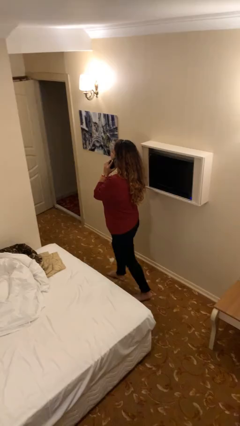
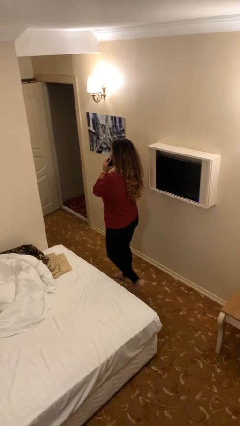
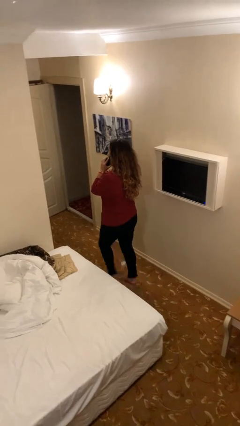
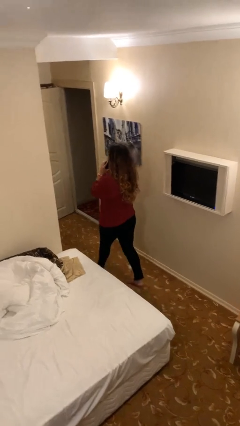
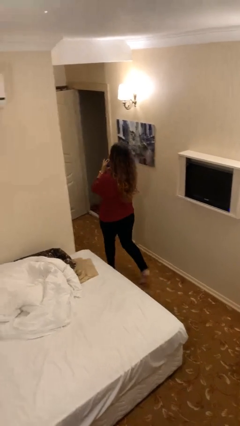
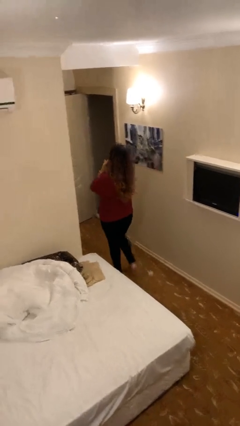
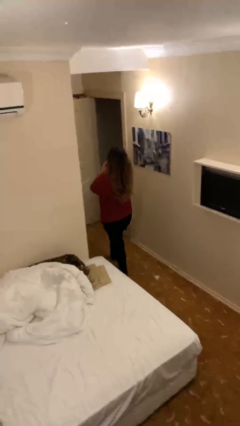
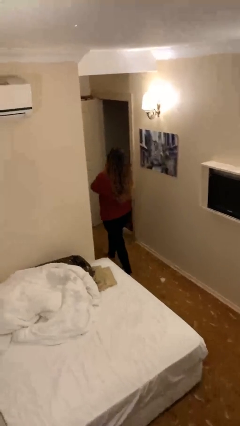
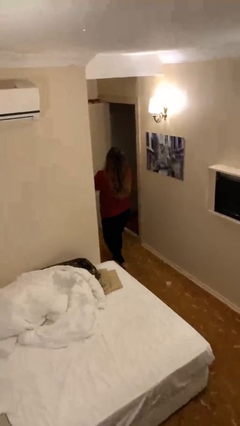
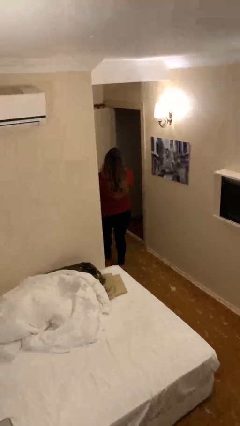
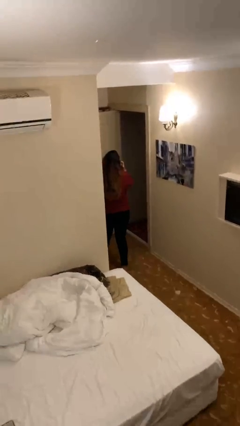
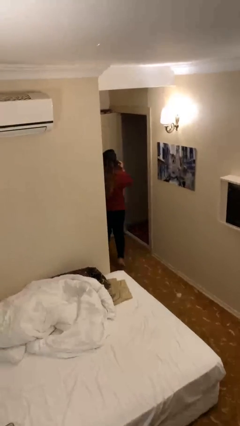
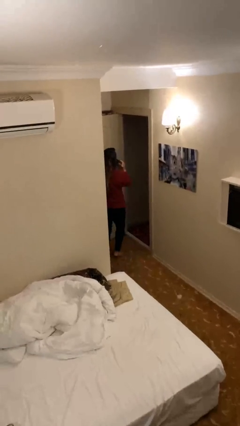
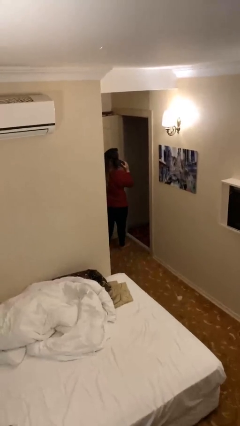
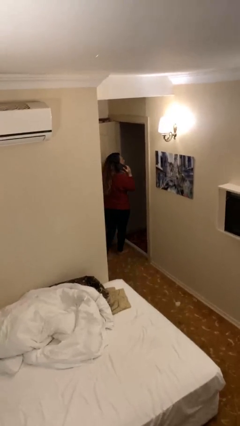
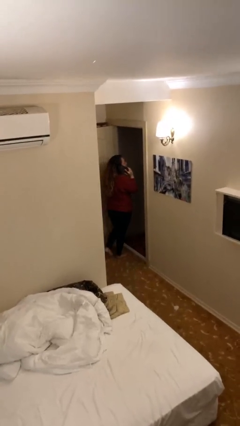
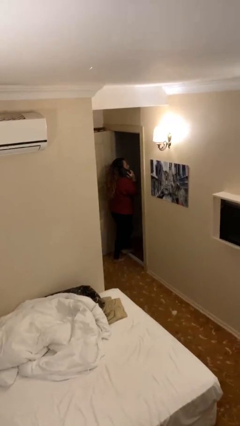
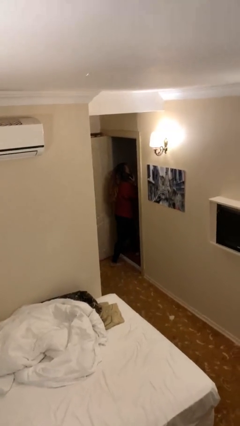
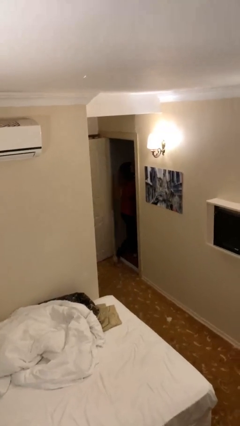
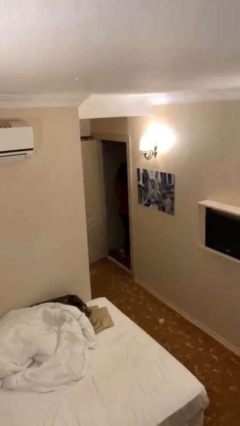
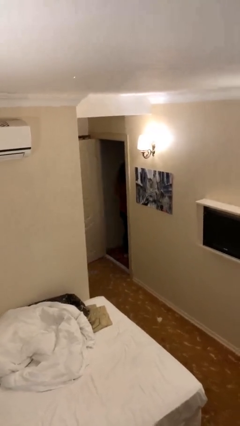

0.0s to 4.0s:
person exits scene through structure

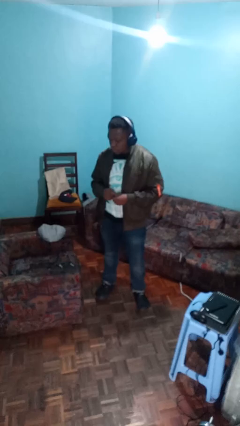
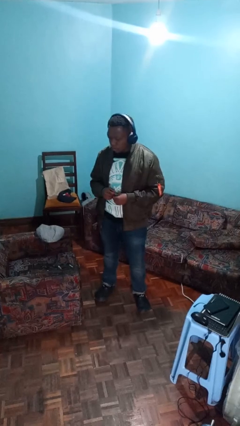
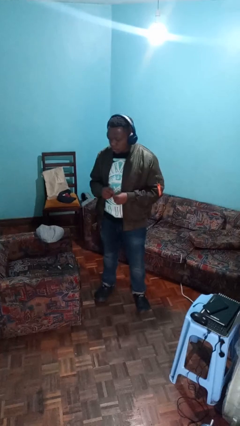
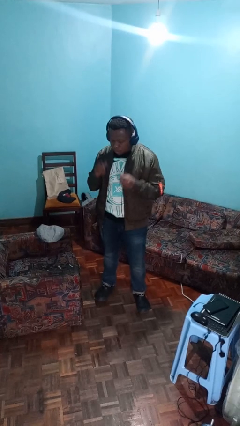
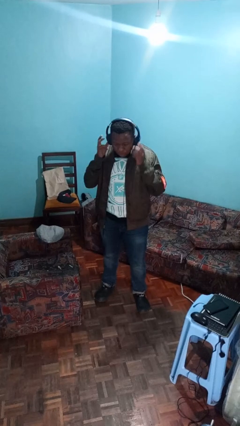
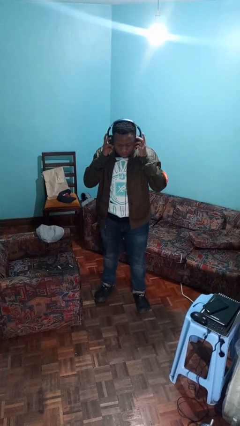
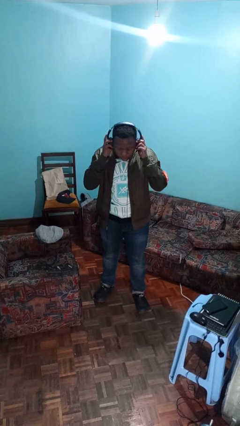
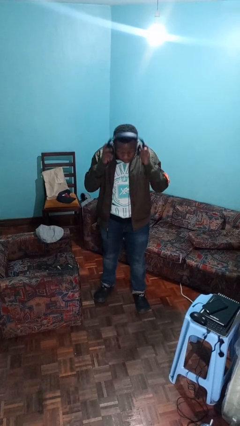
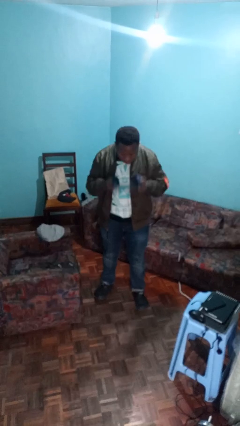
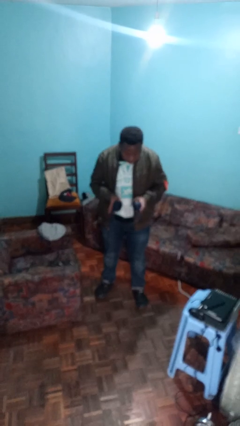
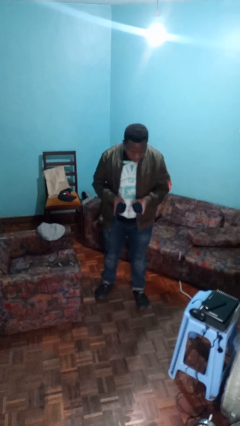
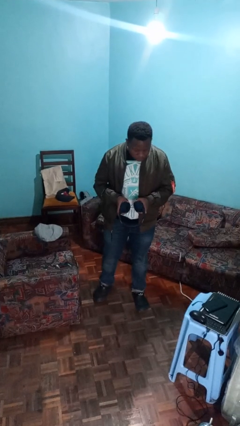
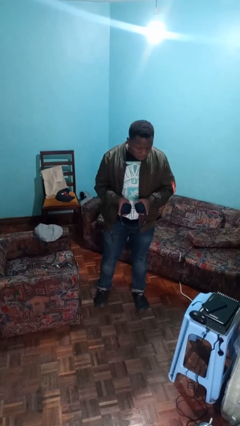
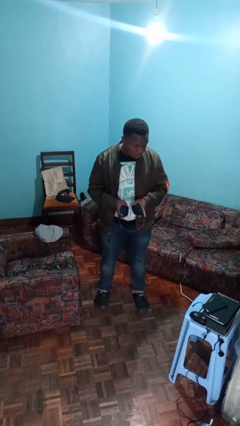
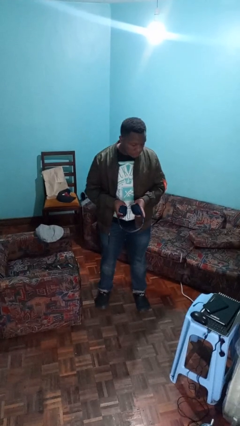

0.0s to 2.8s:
person takes off headphones

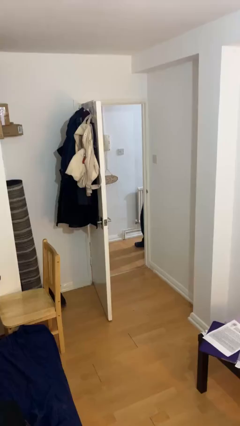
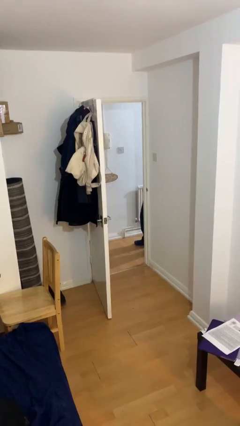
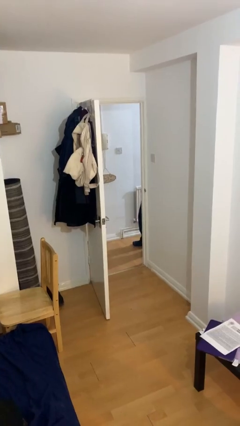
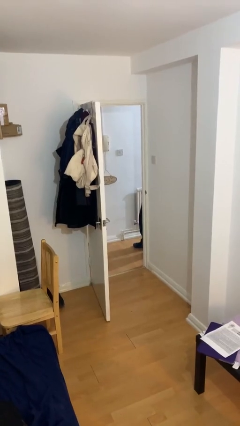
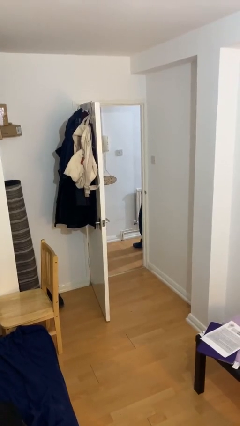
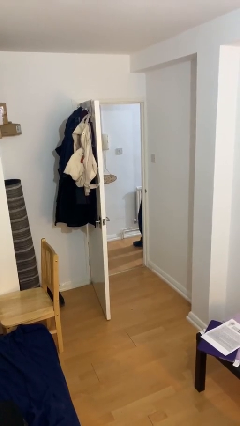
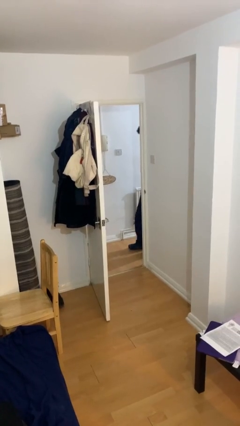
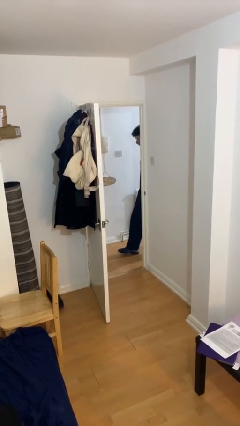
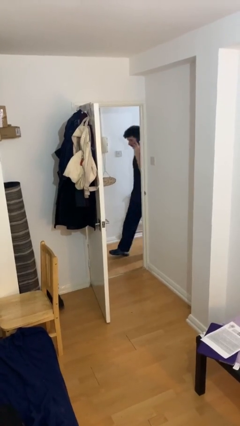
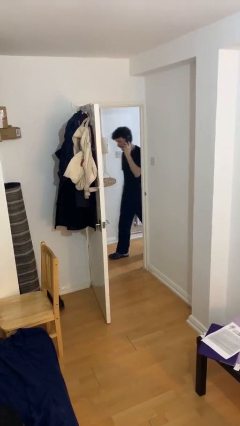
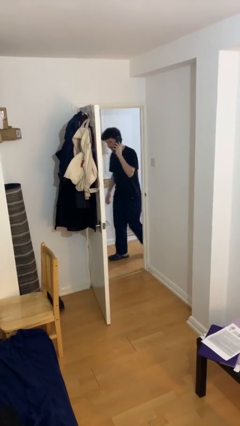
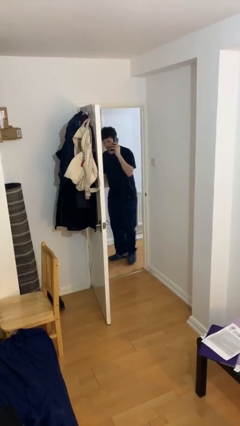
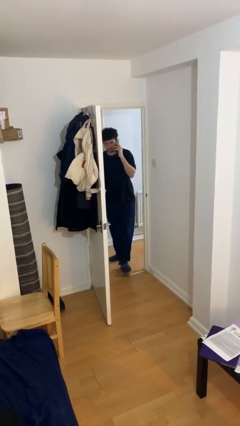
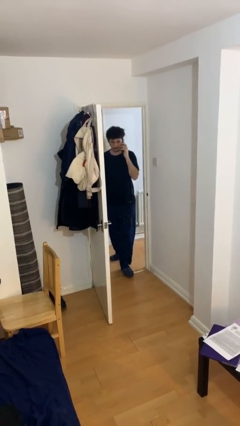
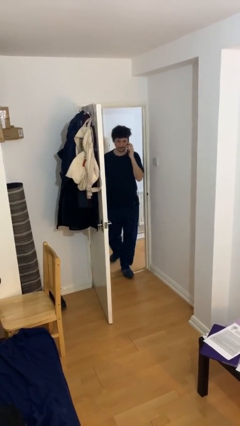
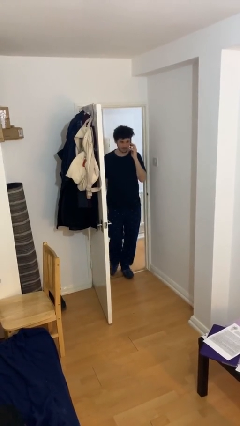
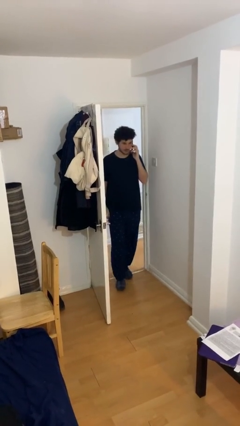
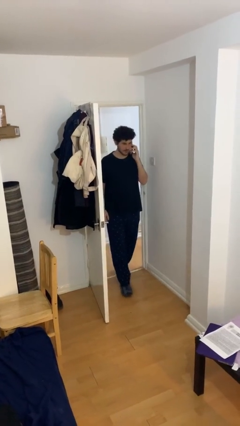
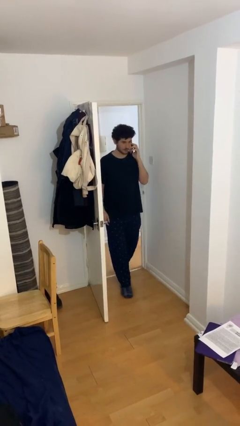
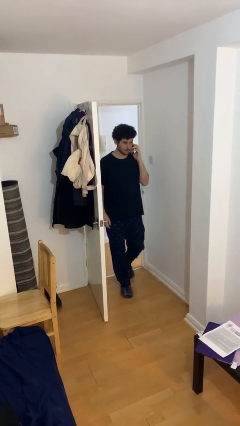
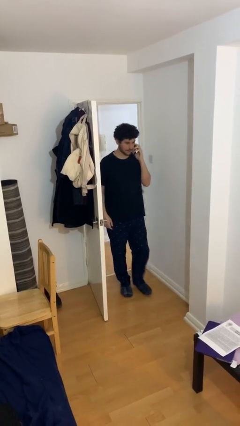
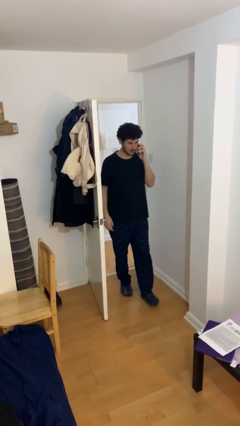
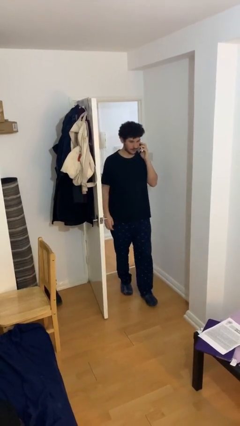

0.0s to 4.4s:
person enters scene through structure

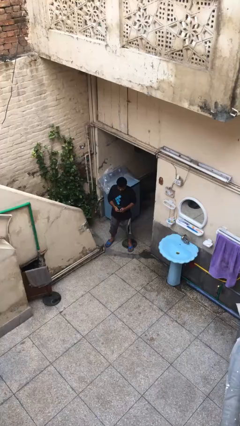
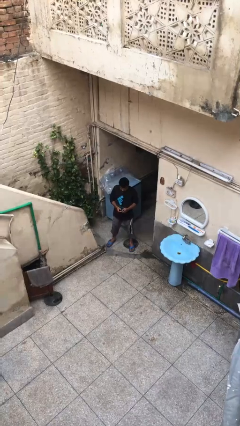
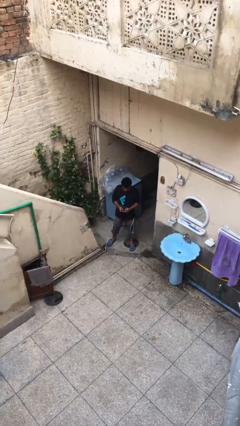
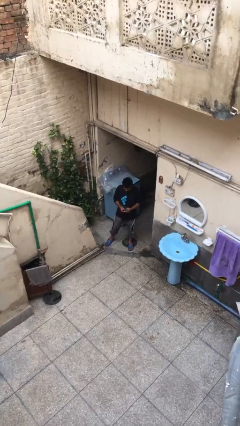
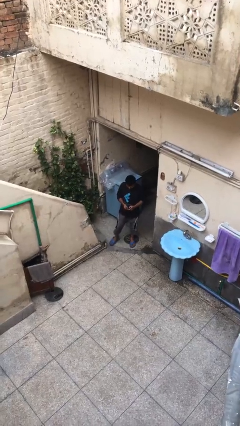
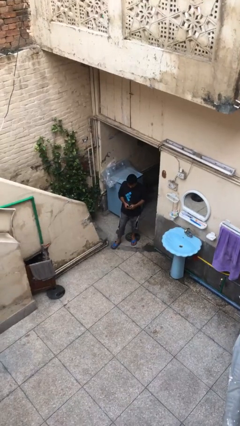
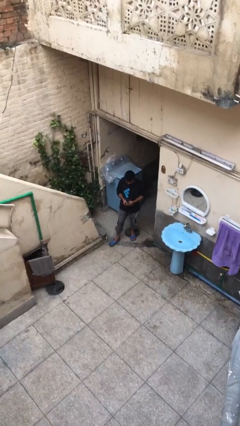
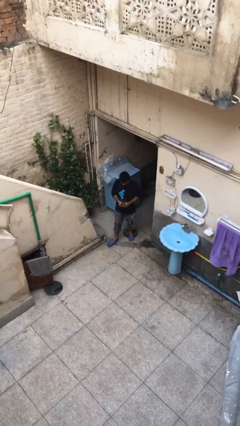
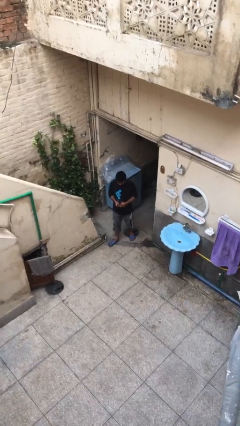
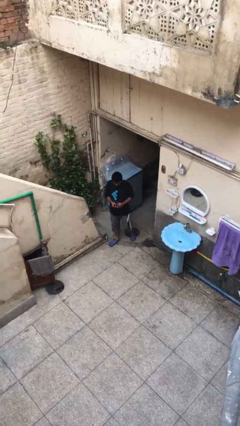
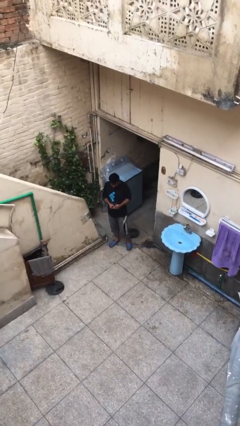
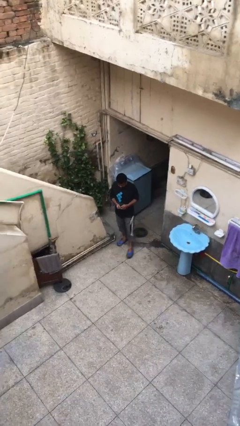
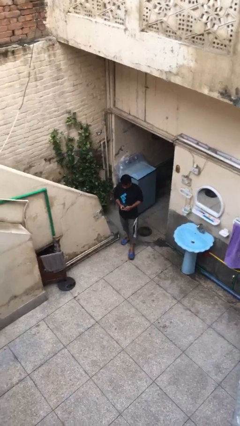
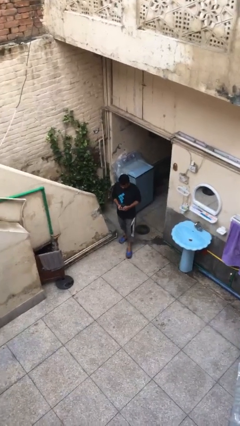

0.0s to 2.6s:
person texts on phone

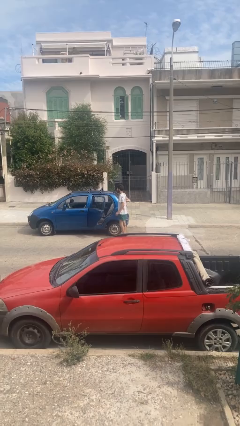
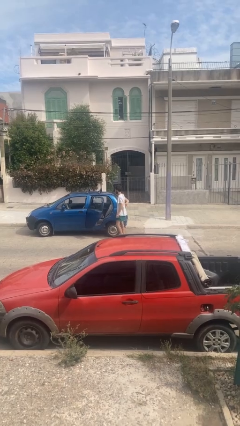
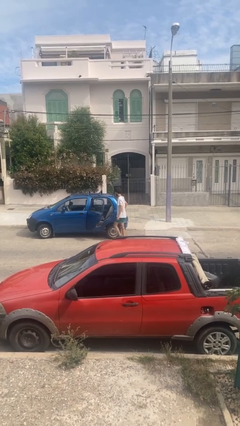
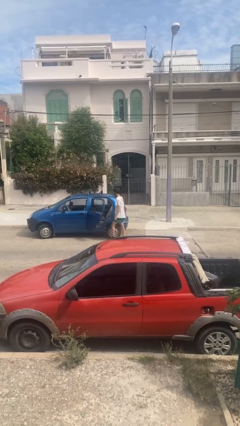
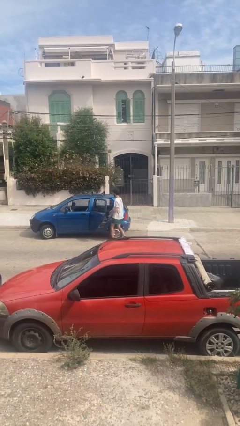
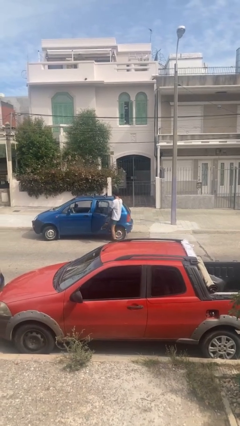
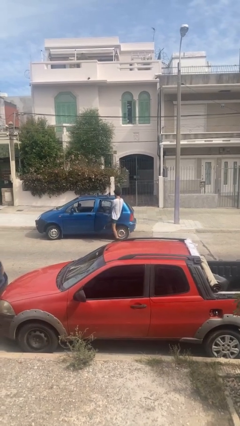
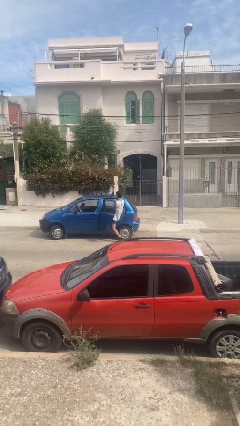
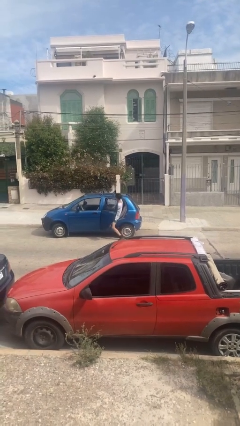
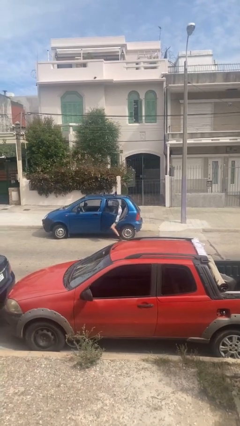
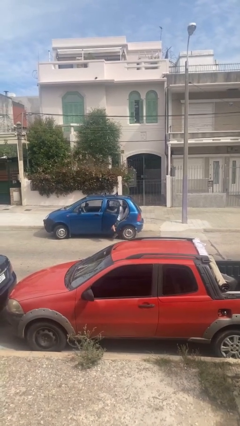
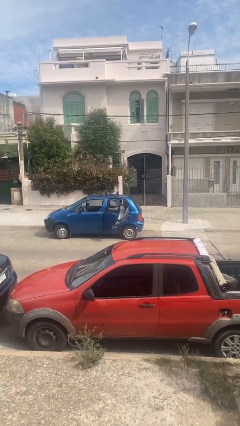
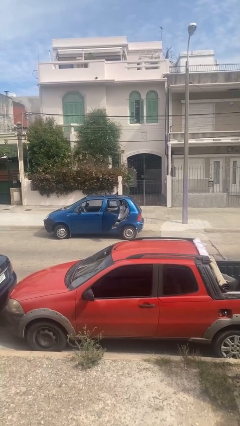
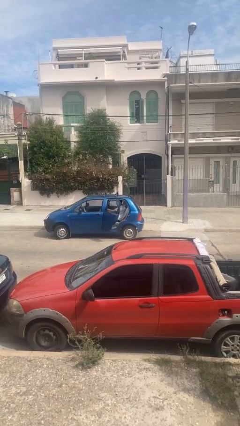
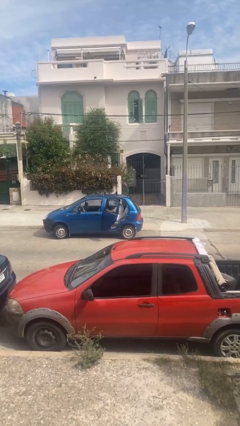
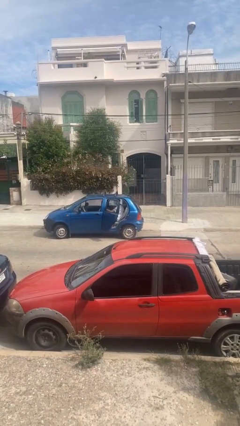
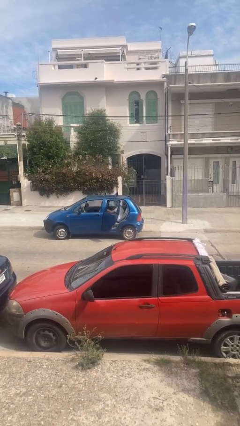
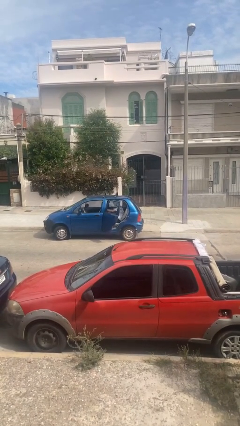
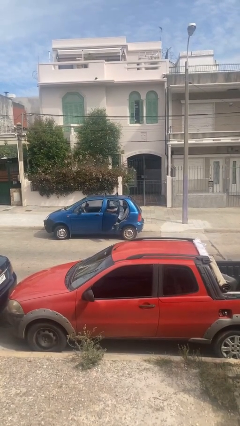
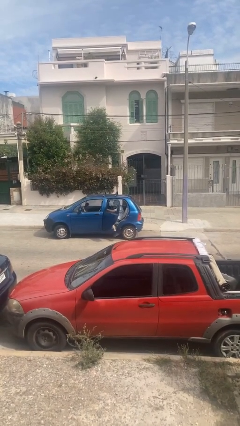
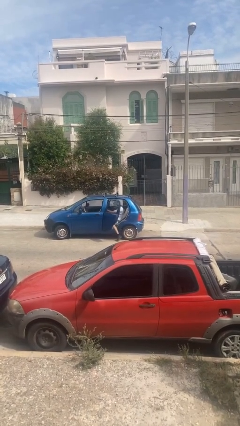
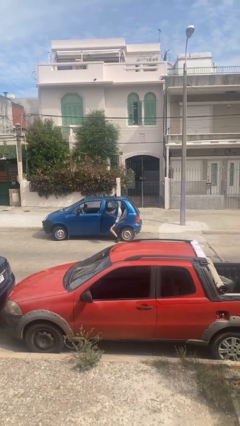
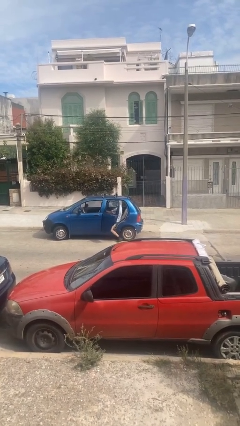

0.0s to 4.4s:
person enters car
